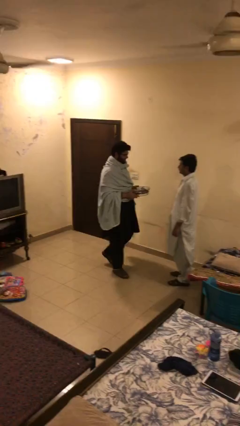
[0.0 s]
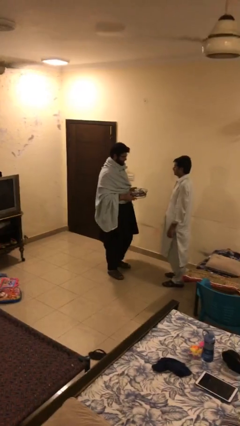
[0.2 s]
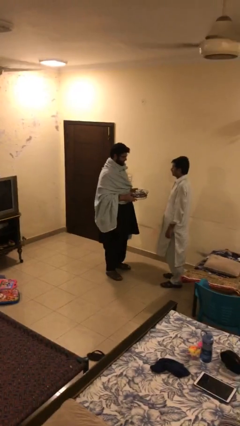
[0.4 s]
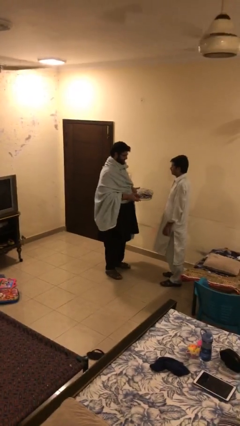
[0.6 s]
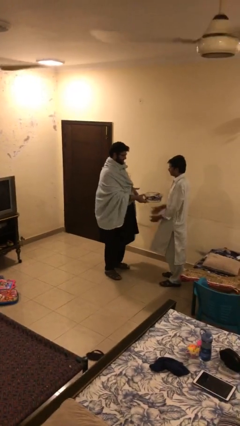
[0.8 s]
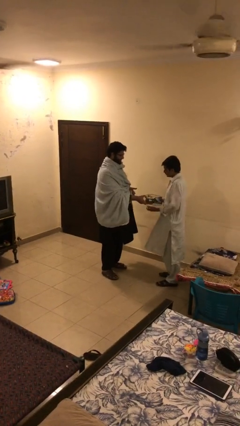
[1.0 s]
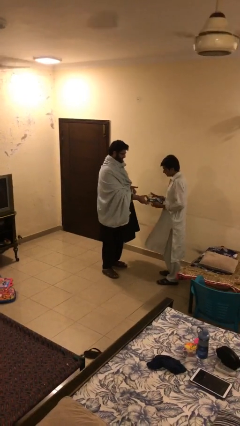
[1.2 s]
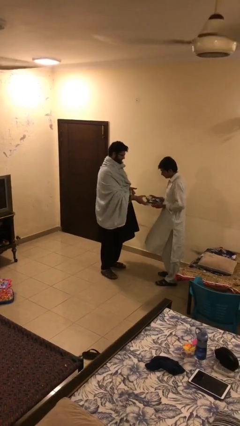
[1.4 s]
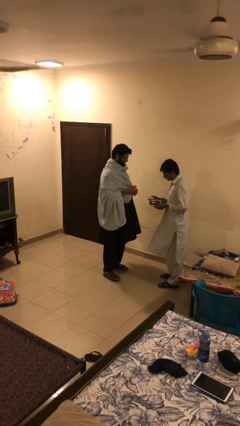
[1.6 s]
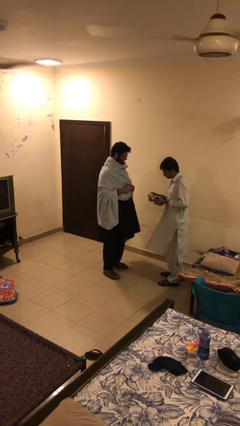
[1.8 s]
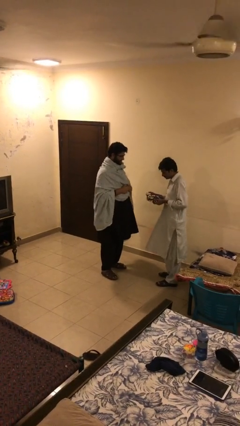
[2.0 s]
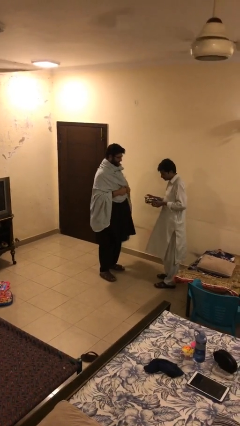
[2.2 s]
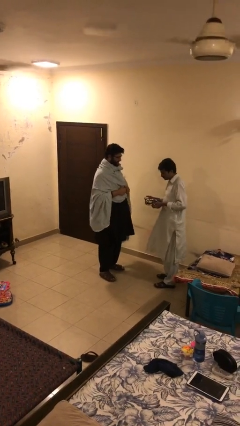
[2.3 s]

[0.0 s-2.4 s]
person transfers object to person

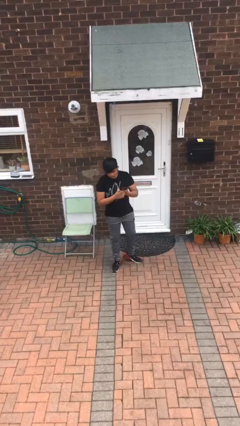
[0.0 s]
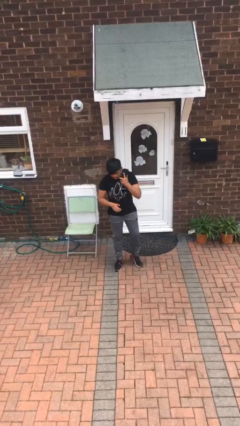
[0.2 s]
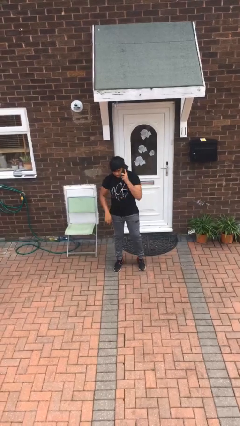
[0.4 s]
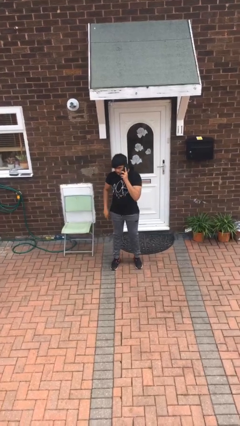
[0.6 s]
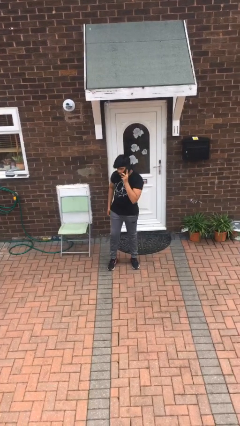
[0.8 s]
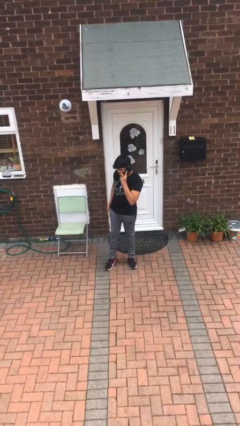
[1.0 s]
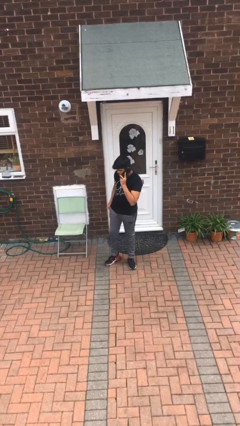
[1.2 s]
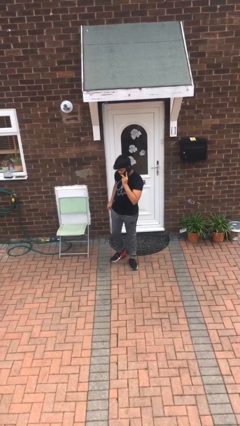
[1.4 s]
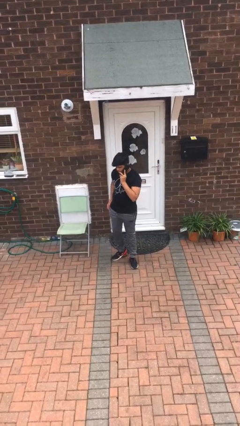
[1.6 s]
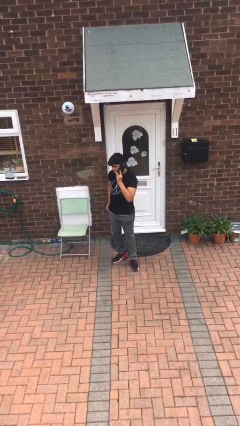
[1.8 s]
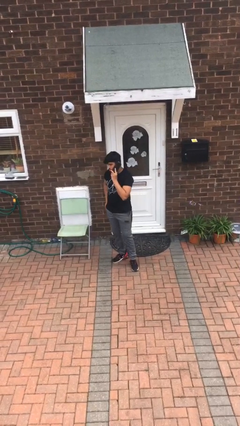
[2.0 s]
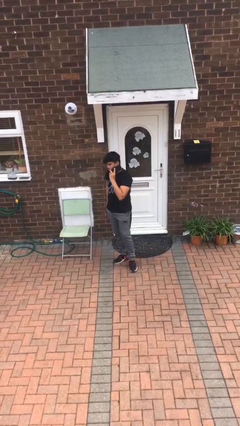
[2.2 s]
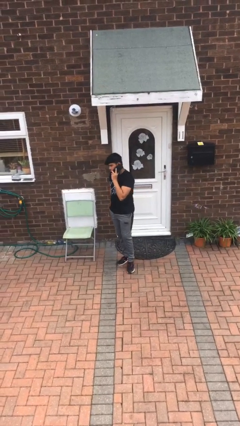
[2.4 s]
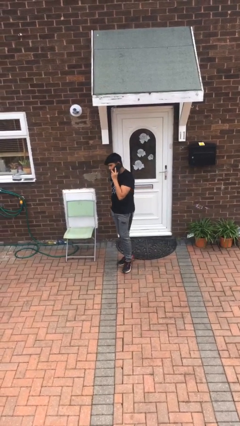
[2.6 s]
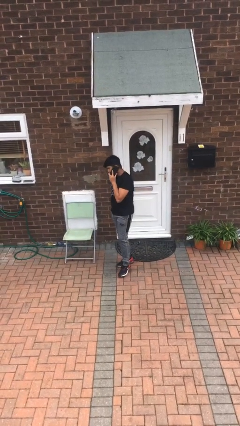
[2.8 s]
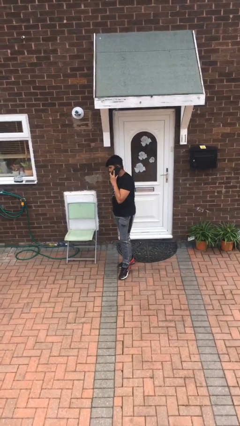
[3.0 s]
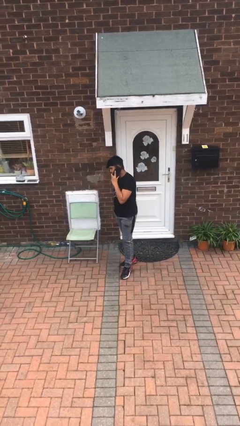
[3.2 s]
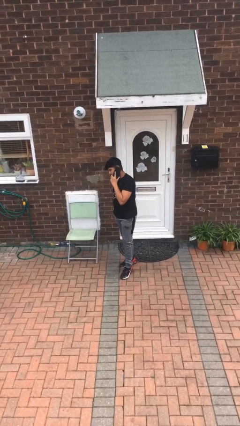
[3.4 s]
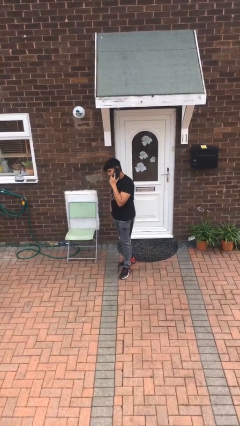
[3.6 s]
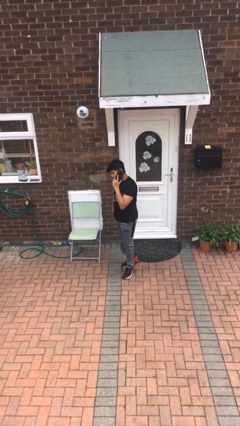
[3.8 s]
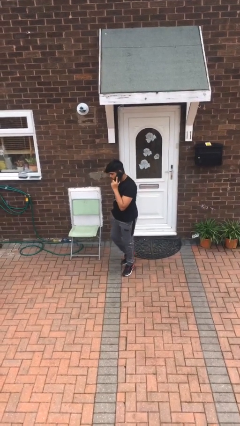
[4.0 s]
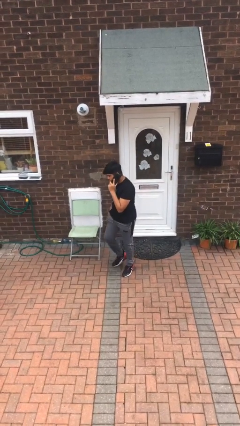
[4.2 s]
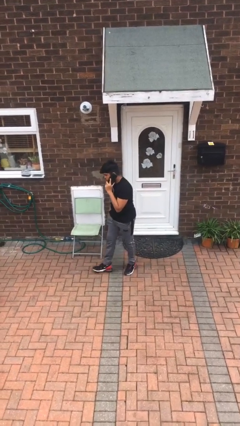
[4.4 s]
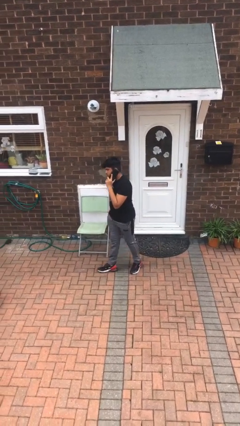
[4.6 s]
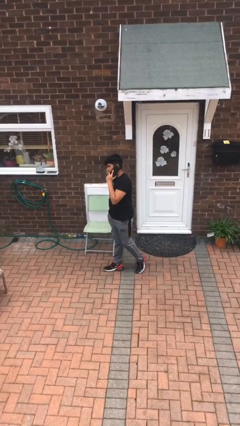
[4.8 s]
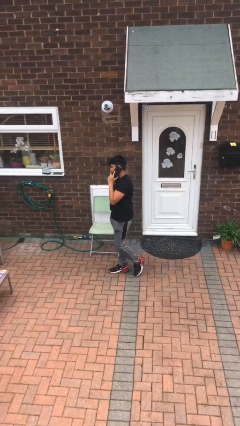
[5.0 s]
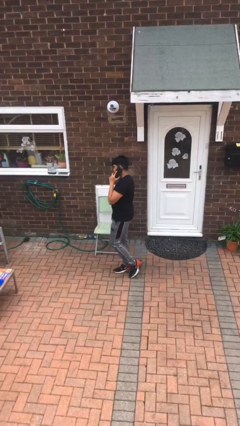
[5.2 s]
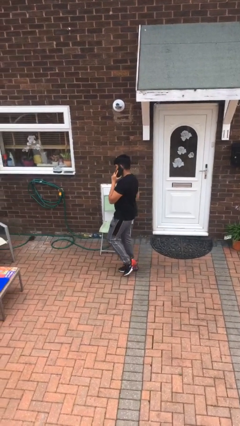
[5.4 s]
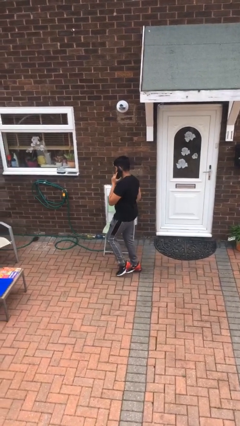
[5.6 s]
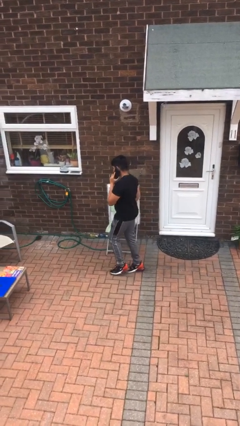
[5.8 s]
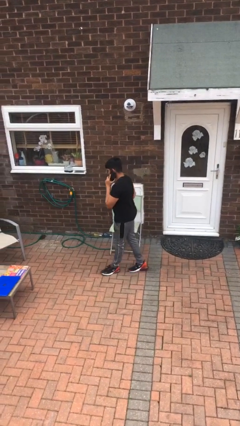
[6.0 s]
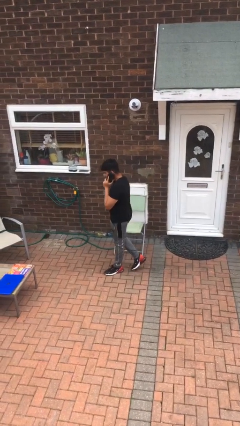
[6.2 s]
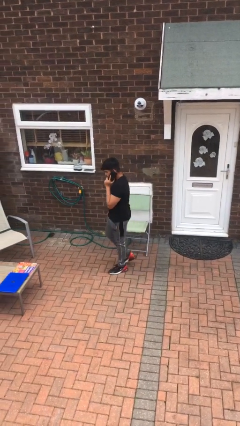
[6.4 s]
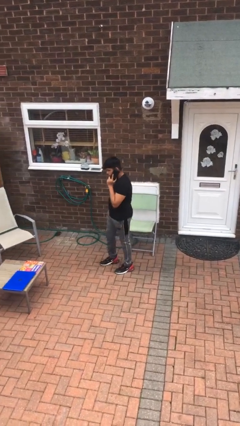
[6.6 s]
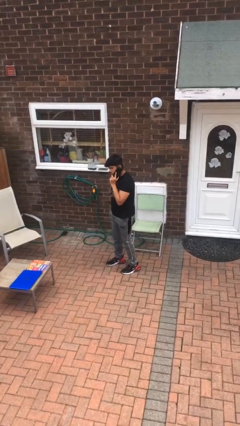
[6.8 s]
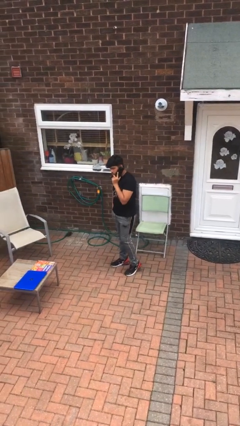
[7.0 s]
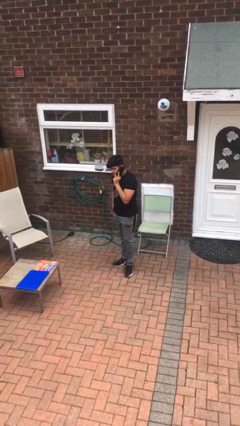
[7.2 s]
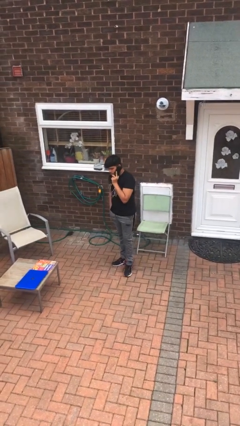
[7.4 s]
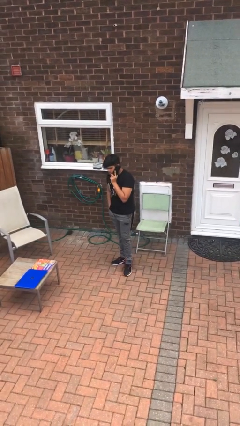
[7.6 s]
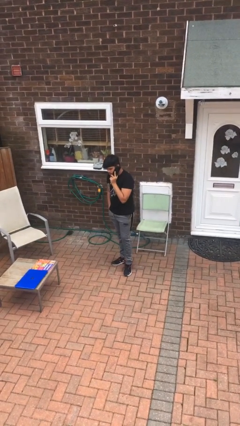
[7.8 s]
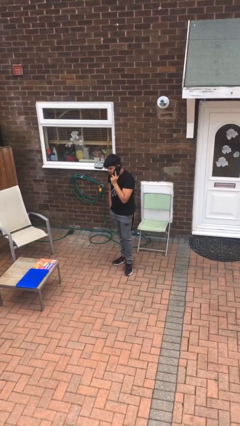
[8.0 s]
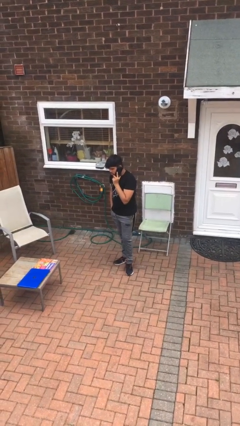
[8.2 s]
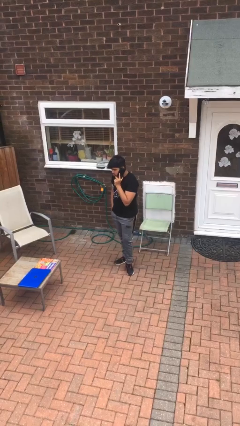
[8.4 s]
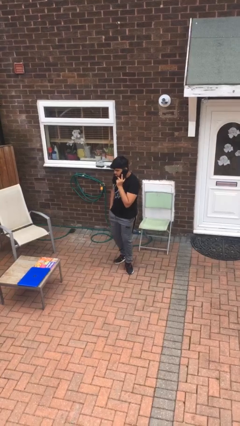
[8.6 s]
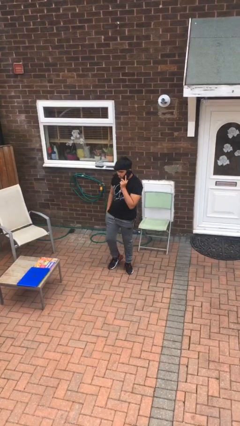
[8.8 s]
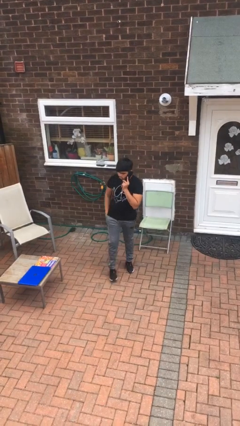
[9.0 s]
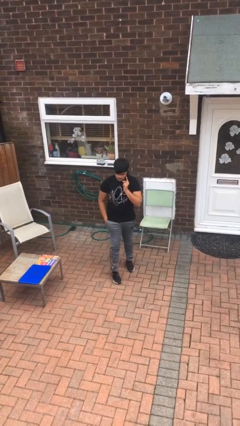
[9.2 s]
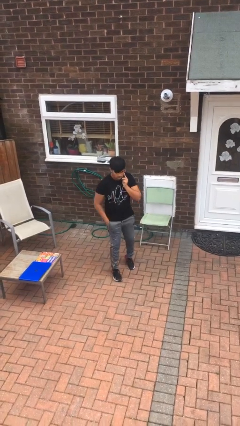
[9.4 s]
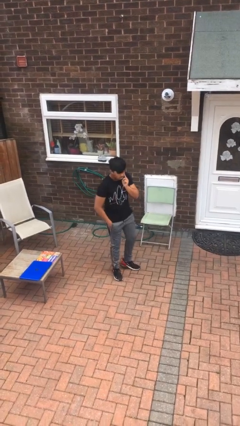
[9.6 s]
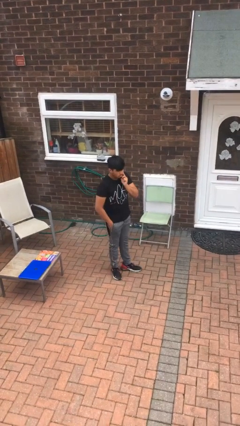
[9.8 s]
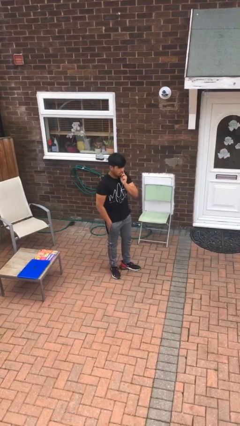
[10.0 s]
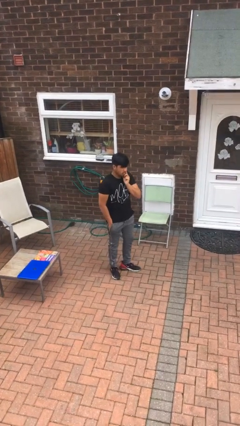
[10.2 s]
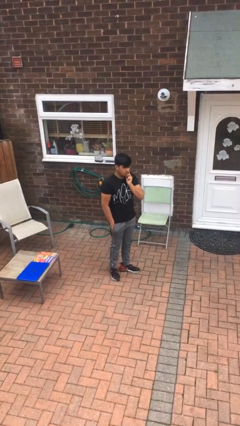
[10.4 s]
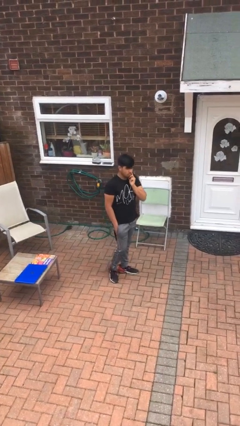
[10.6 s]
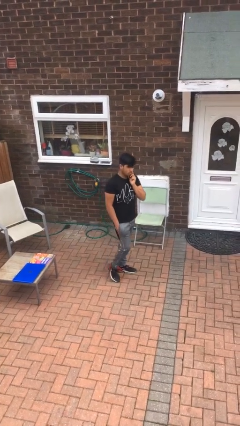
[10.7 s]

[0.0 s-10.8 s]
person talks on phone

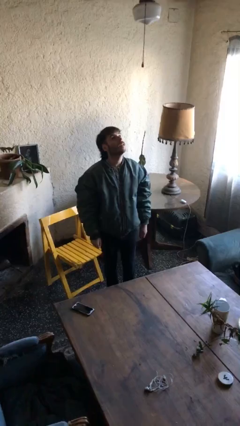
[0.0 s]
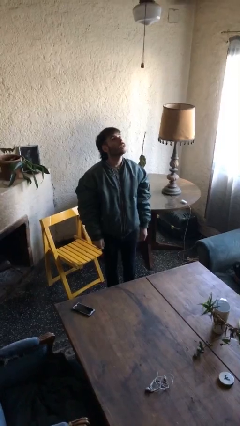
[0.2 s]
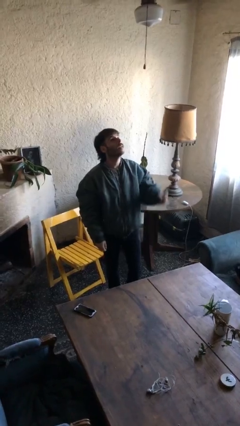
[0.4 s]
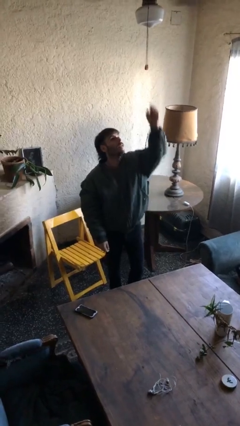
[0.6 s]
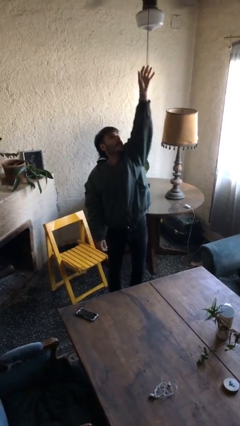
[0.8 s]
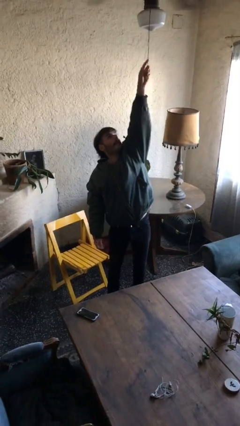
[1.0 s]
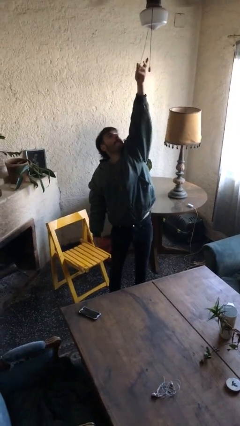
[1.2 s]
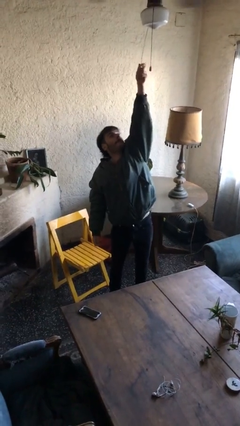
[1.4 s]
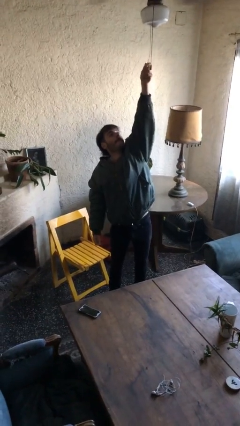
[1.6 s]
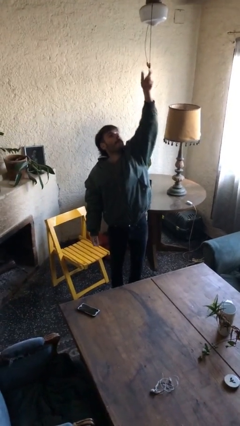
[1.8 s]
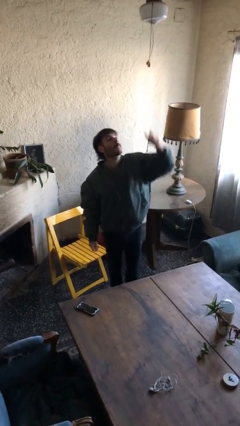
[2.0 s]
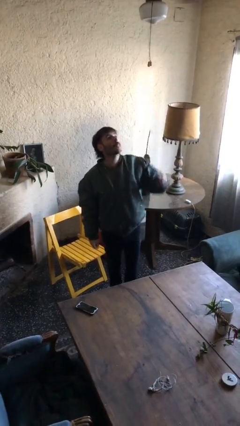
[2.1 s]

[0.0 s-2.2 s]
person turns off fan

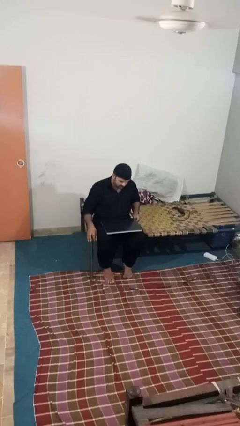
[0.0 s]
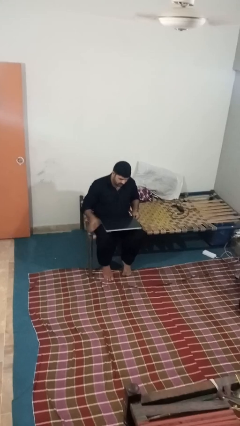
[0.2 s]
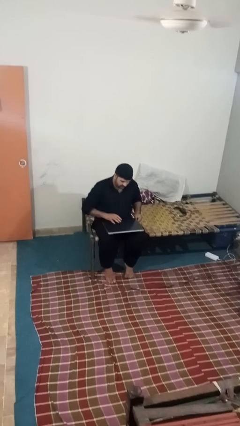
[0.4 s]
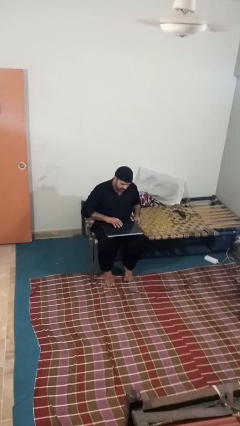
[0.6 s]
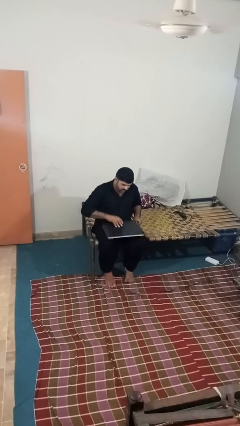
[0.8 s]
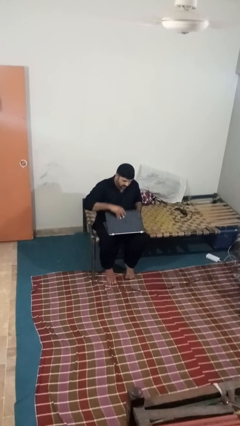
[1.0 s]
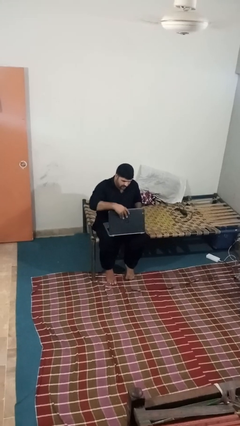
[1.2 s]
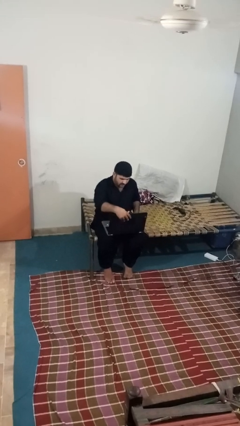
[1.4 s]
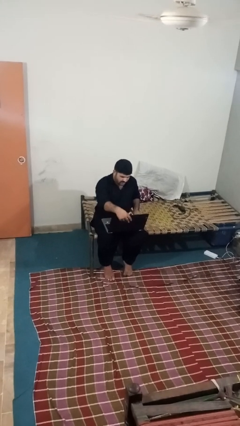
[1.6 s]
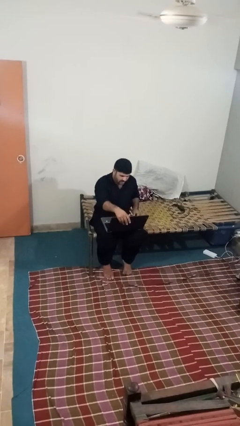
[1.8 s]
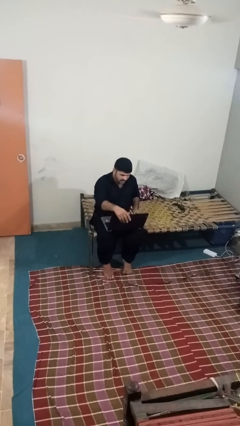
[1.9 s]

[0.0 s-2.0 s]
person opens laptop

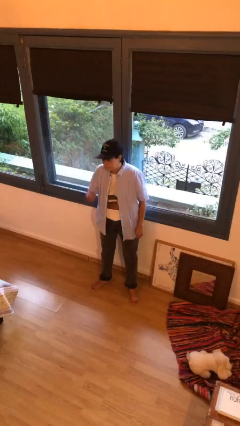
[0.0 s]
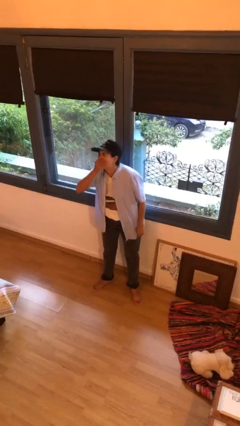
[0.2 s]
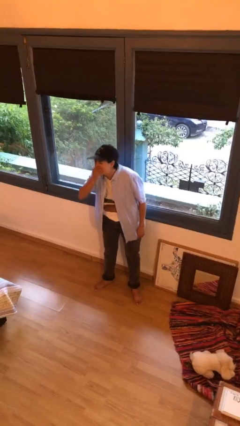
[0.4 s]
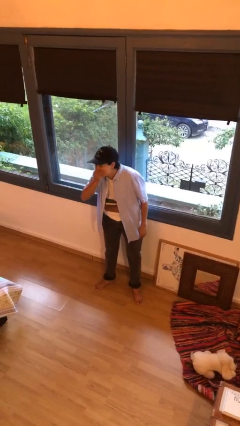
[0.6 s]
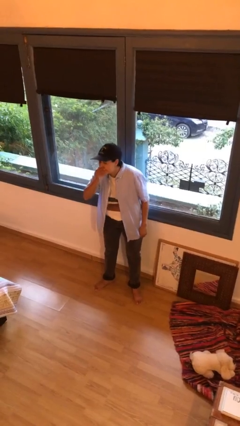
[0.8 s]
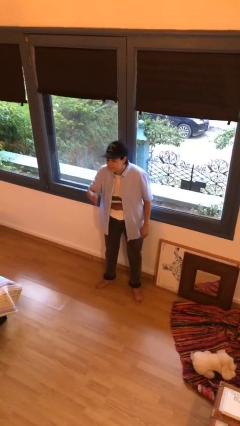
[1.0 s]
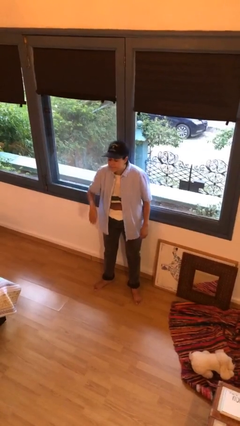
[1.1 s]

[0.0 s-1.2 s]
person sneezes into hand
